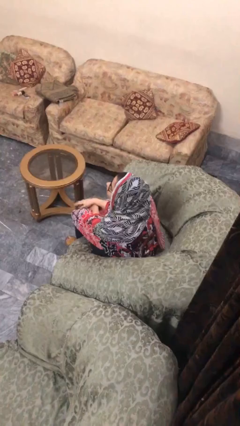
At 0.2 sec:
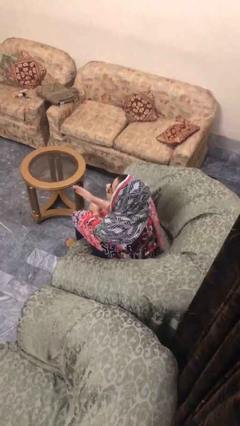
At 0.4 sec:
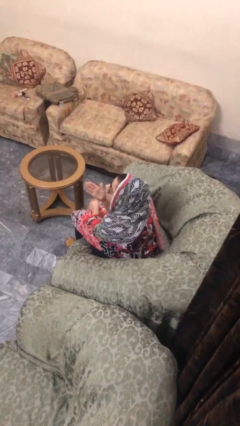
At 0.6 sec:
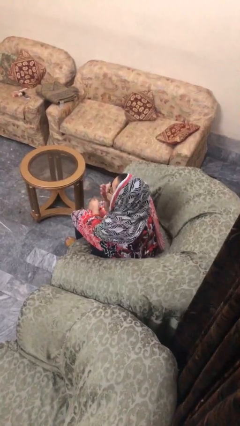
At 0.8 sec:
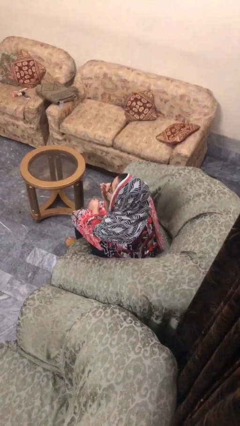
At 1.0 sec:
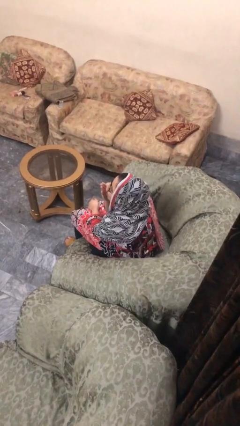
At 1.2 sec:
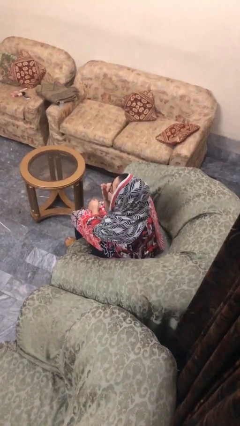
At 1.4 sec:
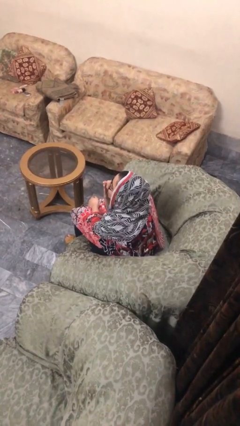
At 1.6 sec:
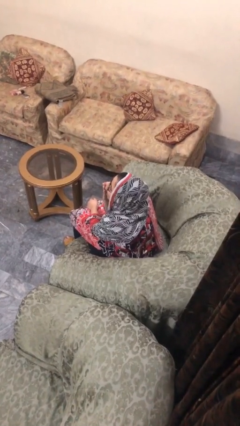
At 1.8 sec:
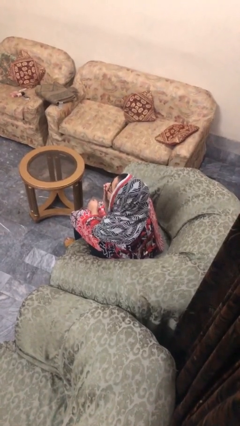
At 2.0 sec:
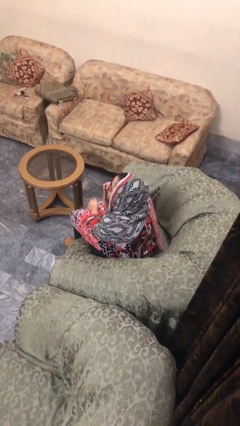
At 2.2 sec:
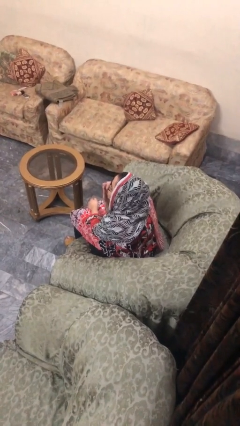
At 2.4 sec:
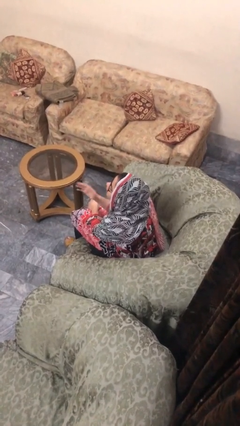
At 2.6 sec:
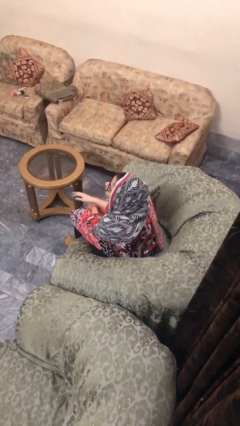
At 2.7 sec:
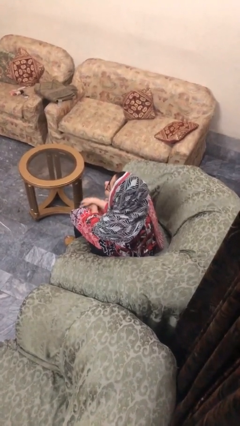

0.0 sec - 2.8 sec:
person yawns

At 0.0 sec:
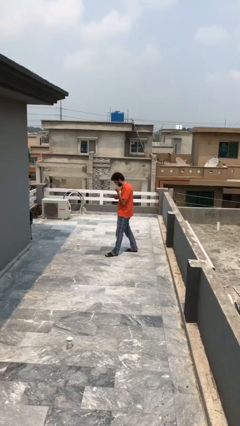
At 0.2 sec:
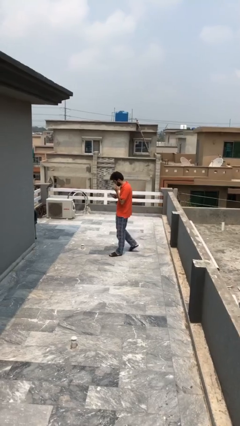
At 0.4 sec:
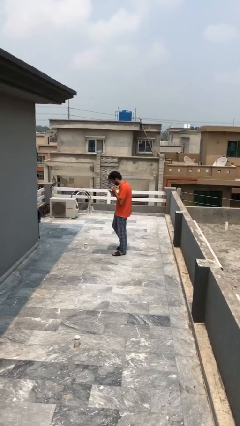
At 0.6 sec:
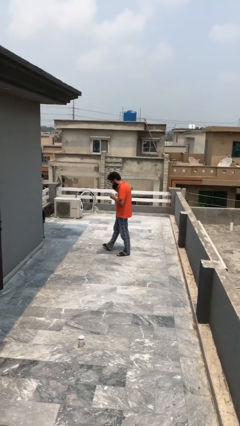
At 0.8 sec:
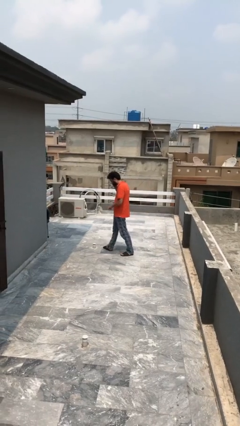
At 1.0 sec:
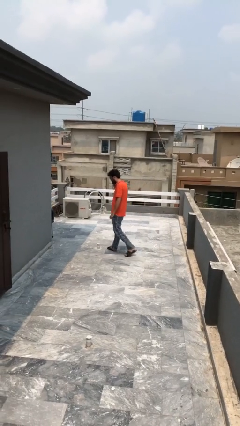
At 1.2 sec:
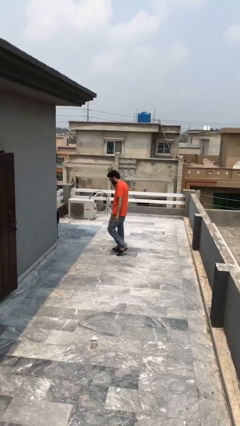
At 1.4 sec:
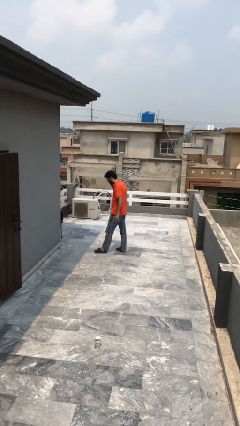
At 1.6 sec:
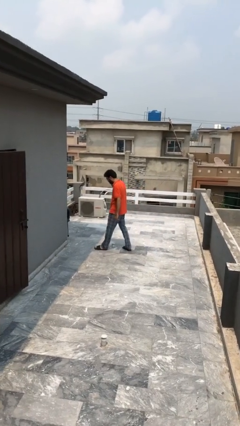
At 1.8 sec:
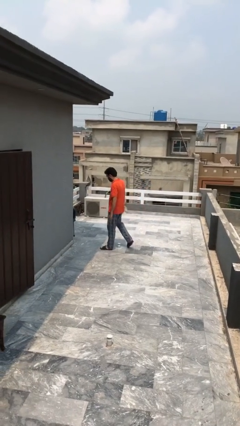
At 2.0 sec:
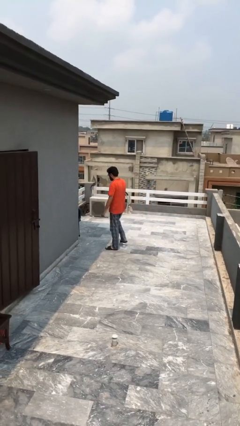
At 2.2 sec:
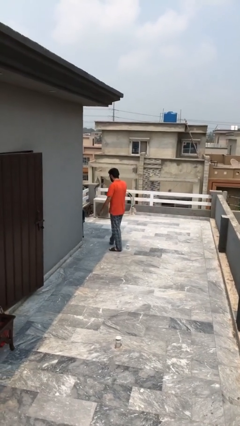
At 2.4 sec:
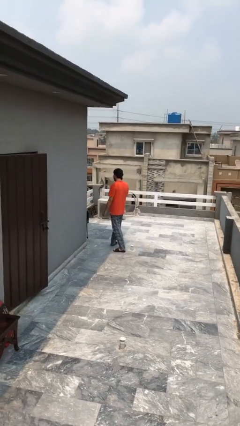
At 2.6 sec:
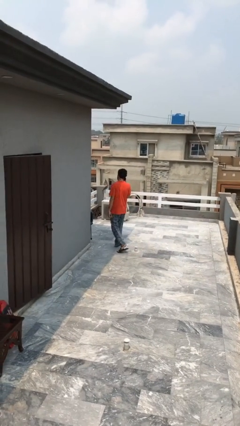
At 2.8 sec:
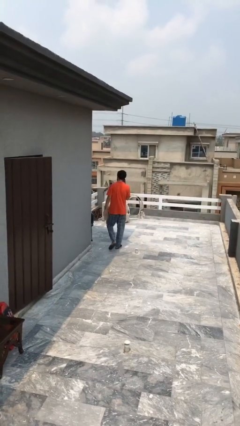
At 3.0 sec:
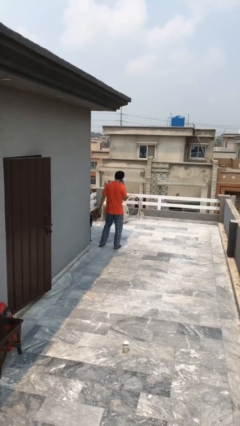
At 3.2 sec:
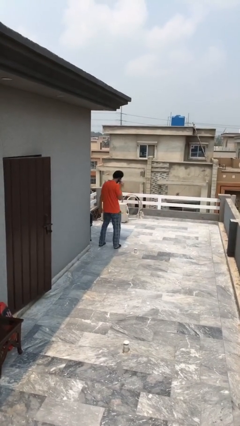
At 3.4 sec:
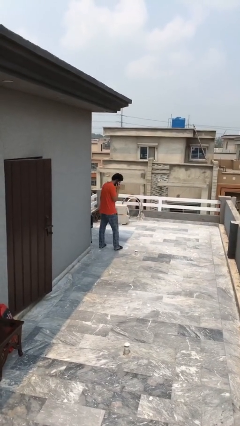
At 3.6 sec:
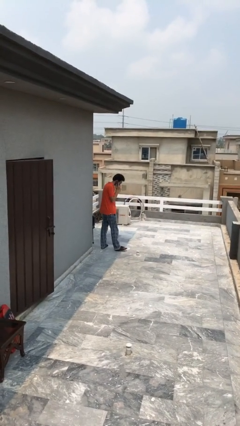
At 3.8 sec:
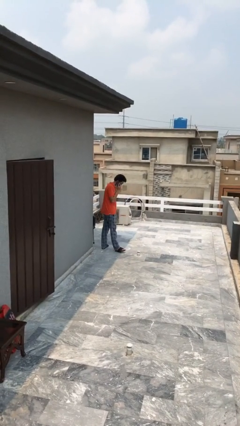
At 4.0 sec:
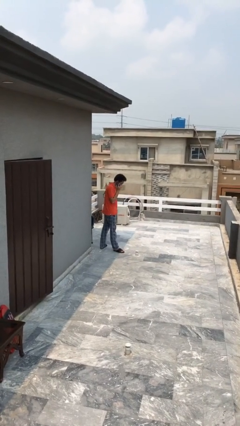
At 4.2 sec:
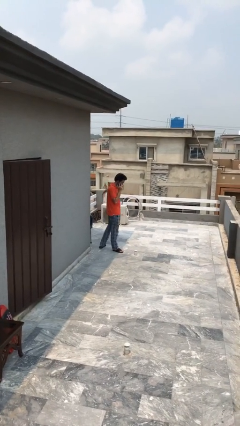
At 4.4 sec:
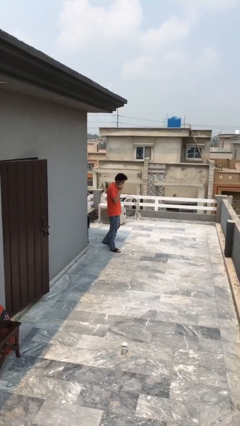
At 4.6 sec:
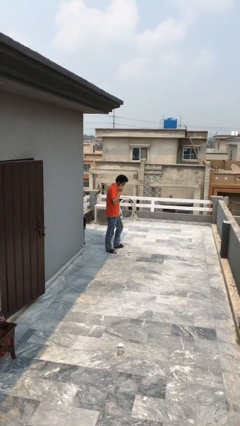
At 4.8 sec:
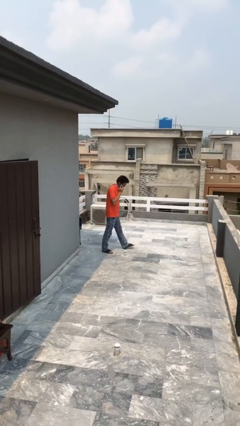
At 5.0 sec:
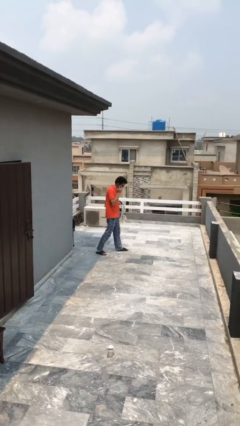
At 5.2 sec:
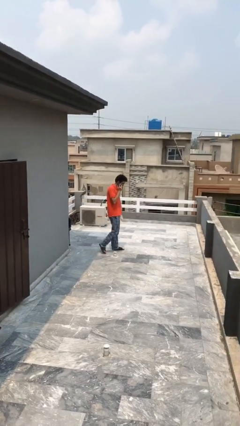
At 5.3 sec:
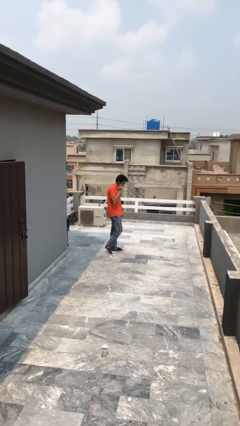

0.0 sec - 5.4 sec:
person talks on phone

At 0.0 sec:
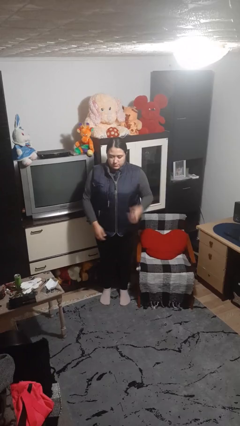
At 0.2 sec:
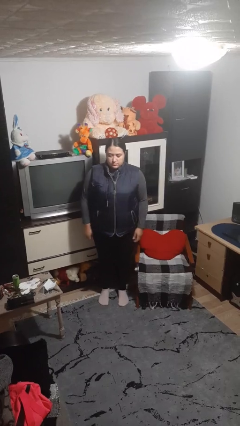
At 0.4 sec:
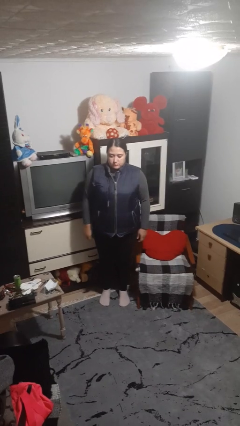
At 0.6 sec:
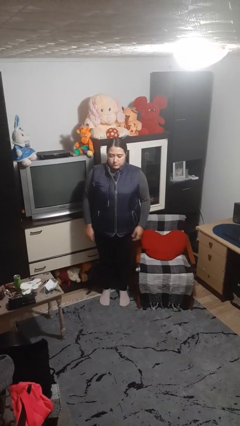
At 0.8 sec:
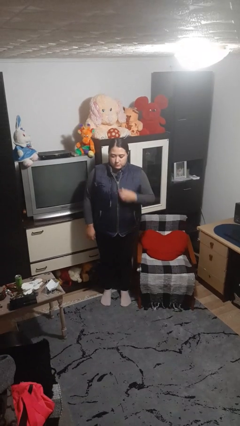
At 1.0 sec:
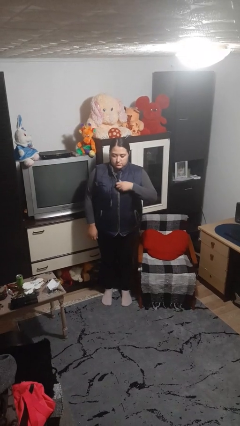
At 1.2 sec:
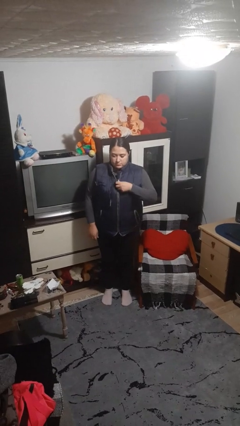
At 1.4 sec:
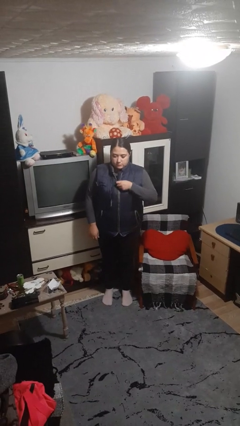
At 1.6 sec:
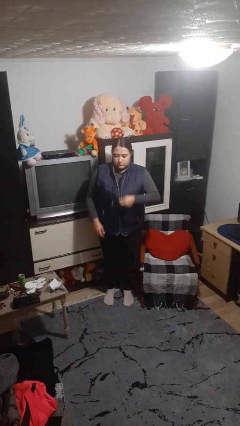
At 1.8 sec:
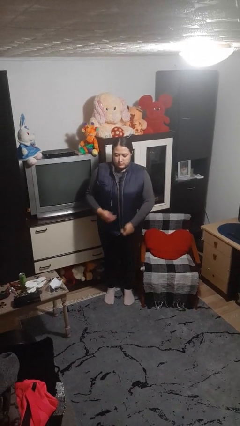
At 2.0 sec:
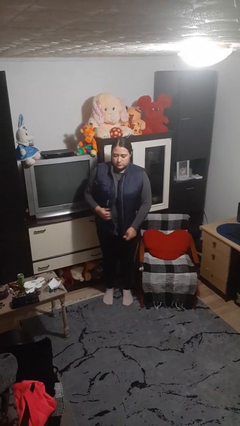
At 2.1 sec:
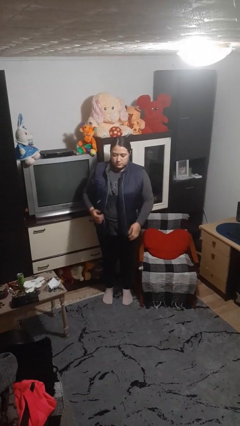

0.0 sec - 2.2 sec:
person unzips jacket

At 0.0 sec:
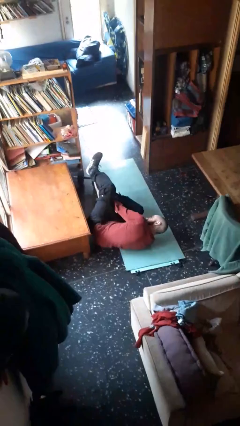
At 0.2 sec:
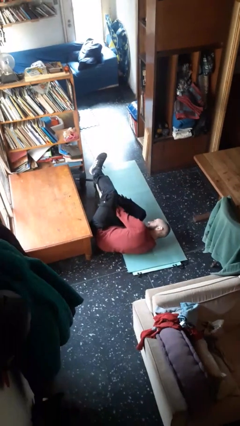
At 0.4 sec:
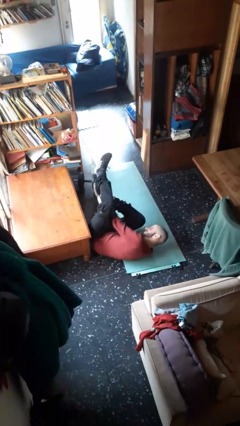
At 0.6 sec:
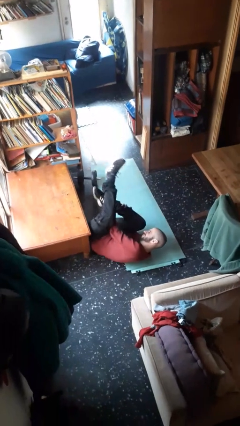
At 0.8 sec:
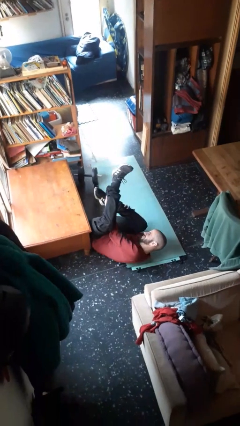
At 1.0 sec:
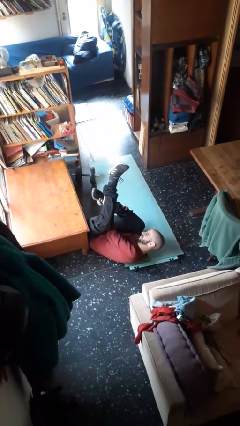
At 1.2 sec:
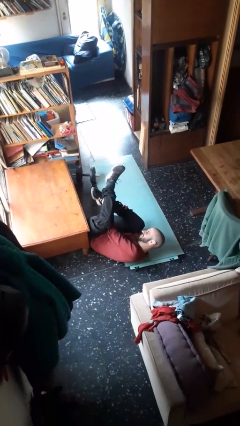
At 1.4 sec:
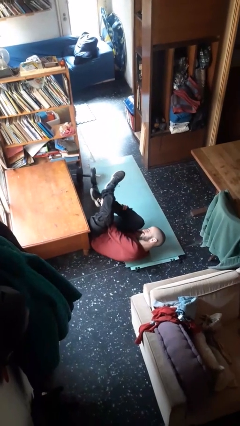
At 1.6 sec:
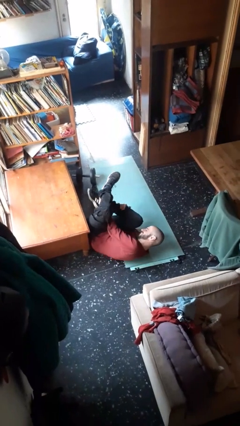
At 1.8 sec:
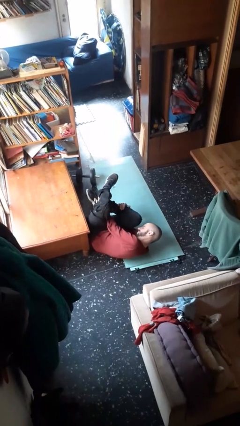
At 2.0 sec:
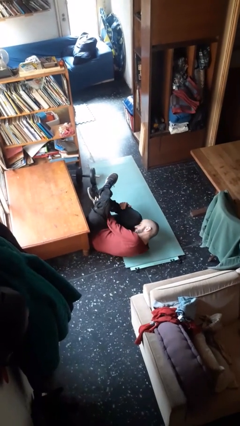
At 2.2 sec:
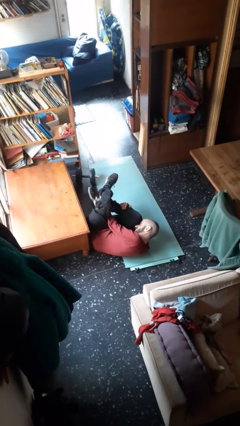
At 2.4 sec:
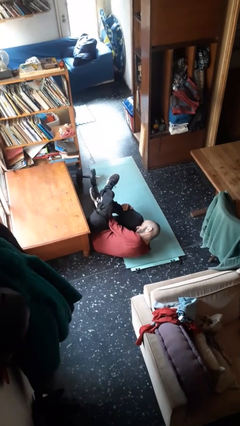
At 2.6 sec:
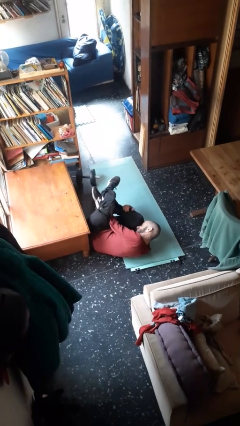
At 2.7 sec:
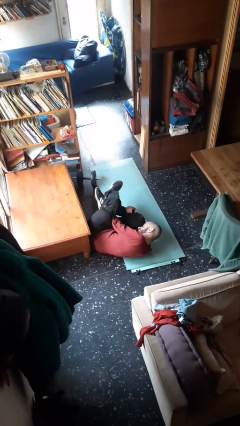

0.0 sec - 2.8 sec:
person lies down on floor

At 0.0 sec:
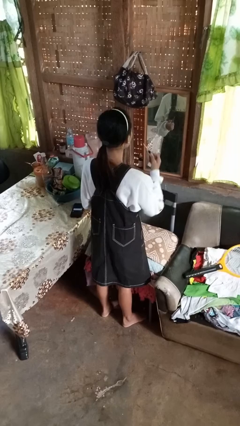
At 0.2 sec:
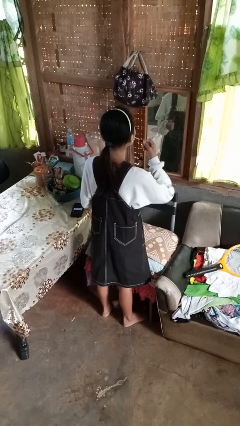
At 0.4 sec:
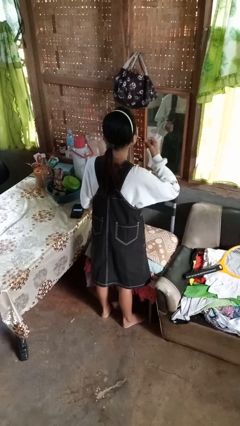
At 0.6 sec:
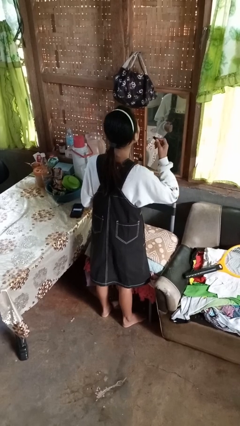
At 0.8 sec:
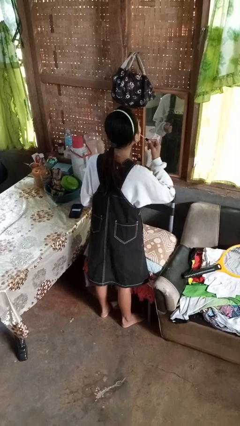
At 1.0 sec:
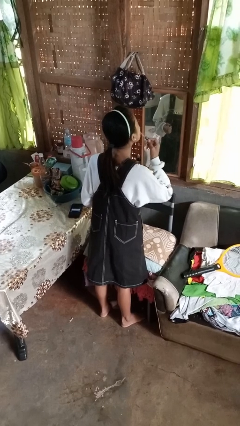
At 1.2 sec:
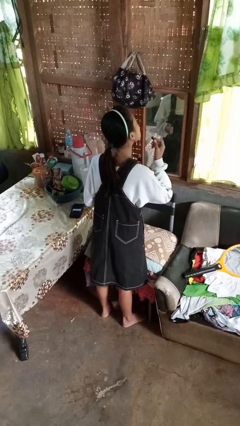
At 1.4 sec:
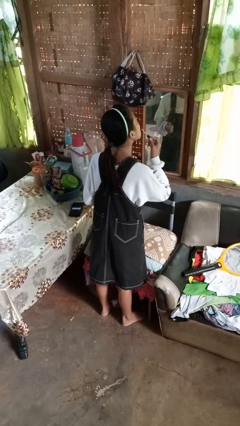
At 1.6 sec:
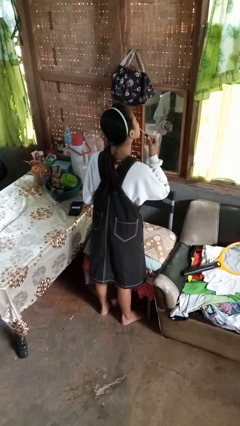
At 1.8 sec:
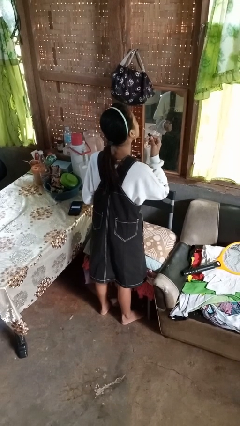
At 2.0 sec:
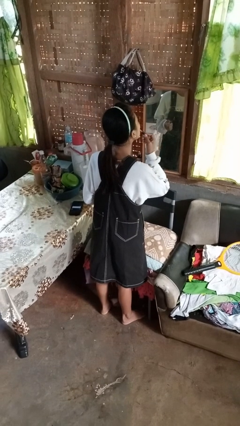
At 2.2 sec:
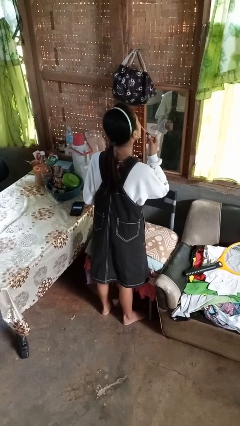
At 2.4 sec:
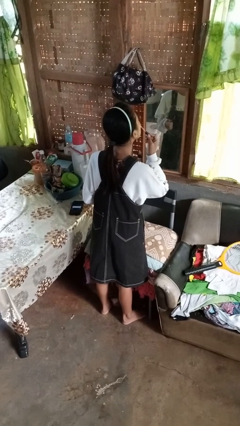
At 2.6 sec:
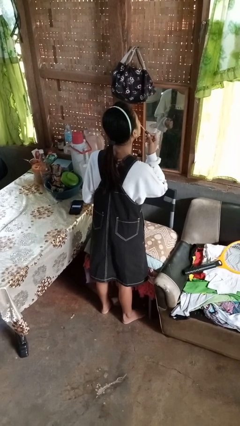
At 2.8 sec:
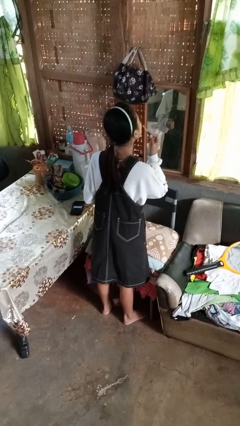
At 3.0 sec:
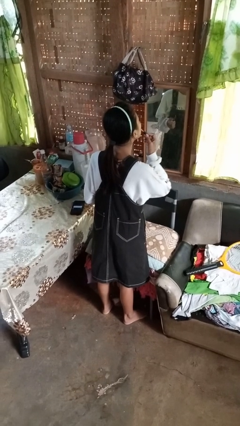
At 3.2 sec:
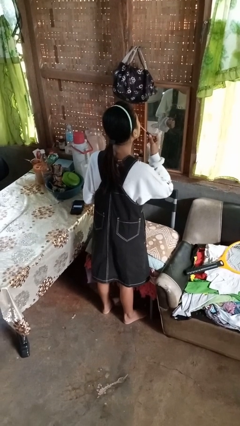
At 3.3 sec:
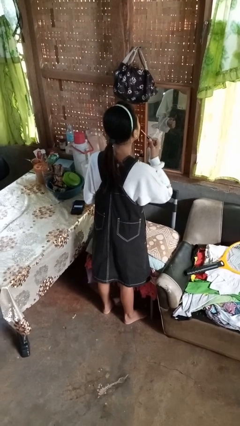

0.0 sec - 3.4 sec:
person applies lip makeup

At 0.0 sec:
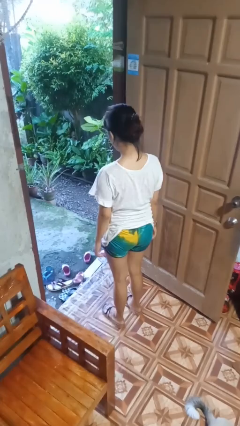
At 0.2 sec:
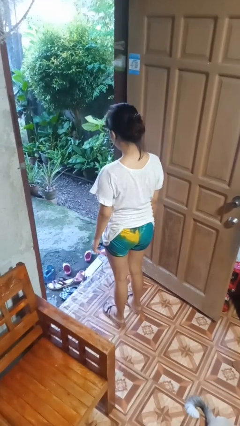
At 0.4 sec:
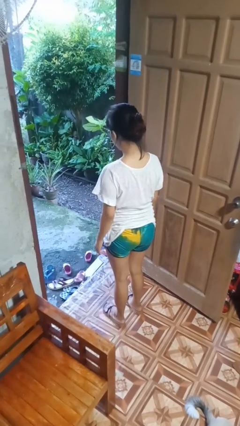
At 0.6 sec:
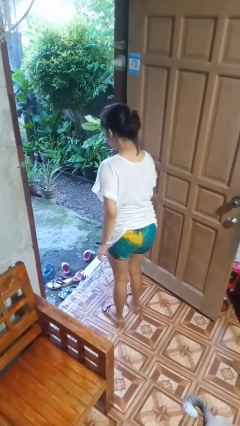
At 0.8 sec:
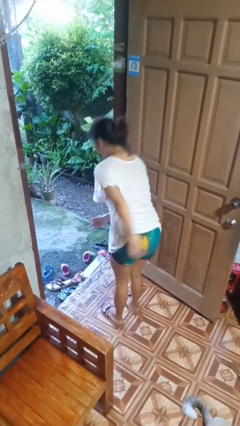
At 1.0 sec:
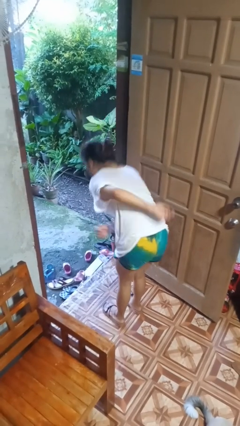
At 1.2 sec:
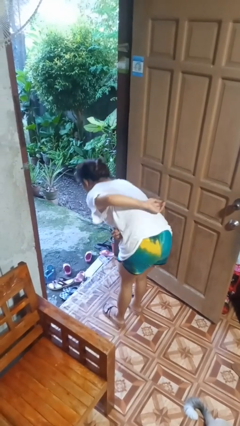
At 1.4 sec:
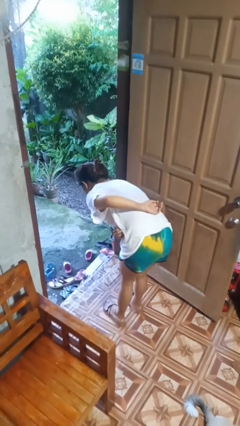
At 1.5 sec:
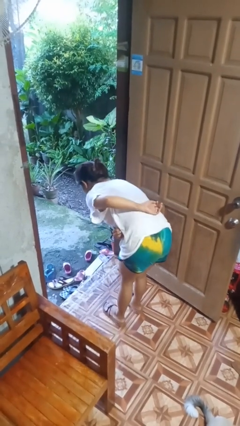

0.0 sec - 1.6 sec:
person bows
